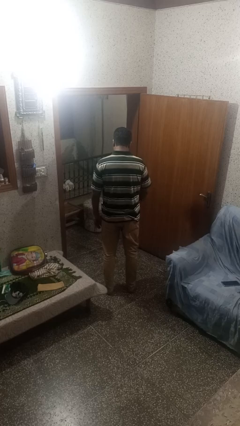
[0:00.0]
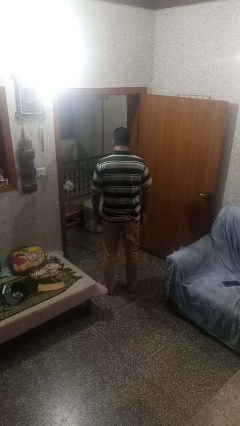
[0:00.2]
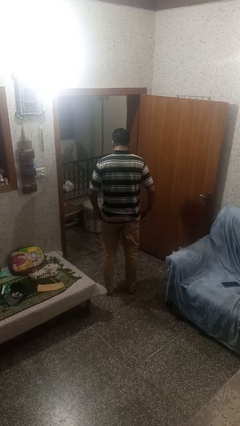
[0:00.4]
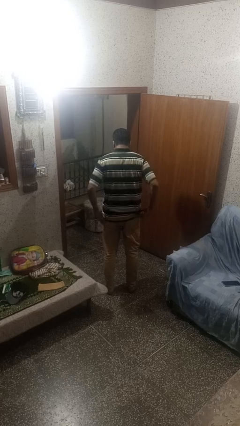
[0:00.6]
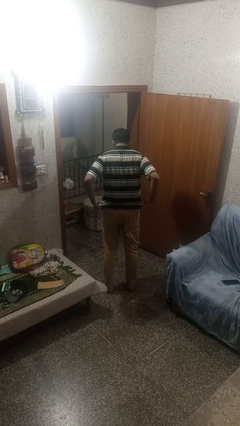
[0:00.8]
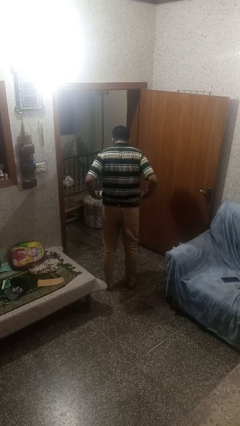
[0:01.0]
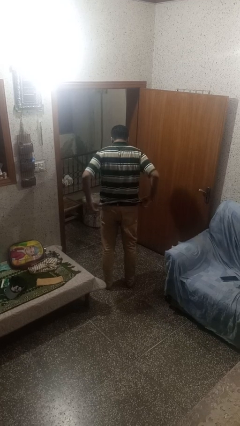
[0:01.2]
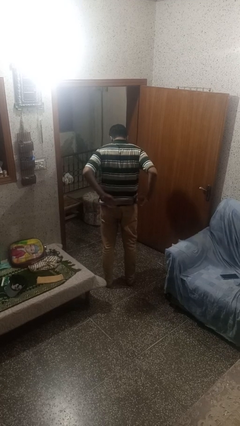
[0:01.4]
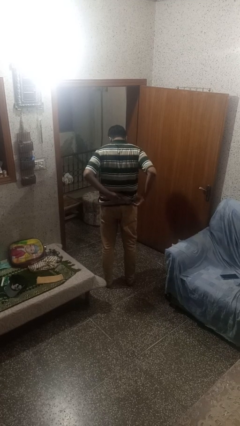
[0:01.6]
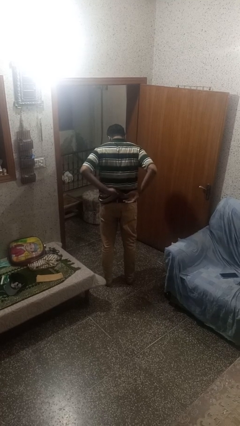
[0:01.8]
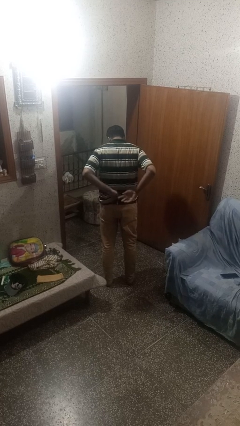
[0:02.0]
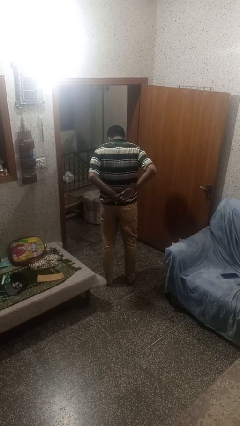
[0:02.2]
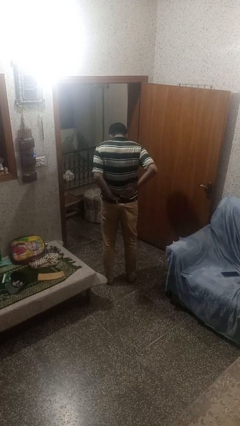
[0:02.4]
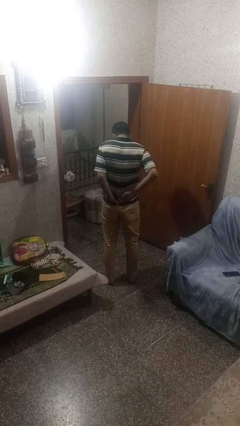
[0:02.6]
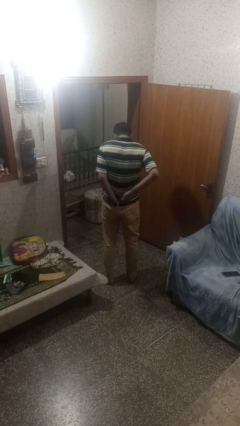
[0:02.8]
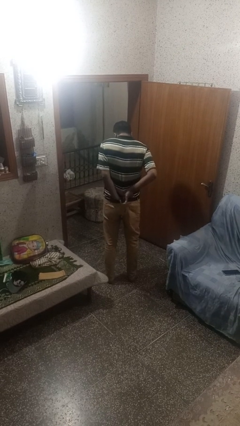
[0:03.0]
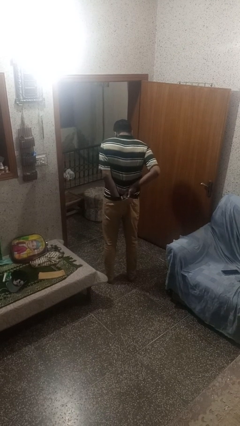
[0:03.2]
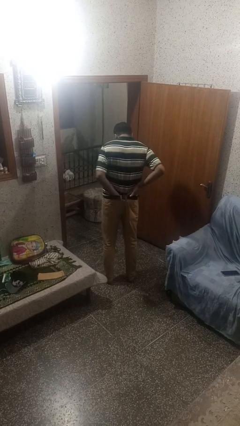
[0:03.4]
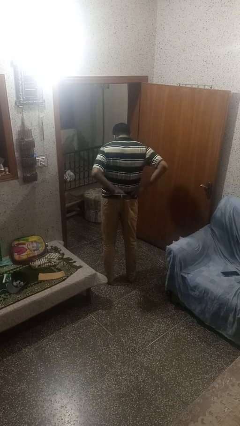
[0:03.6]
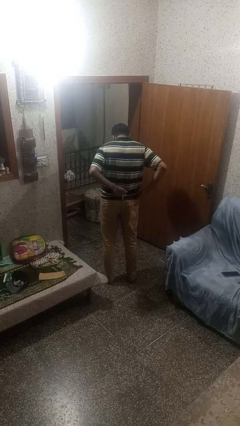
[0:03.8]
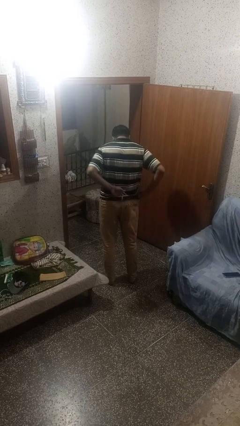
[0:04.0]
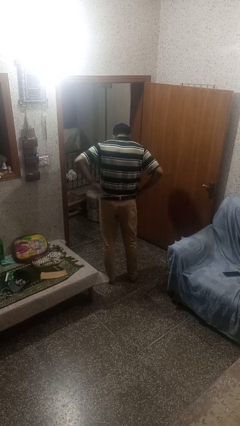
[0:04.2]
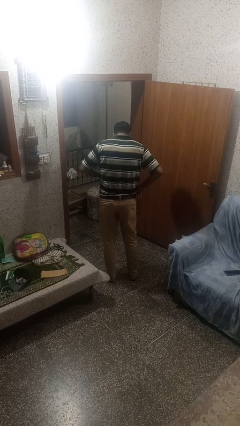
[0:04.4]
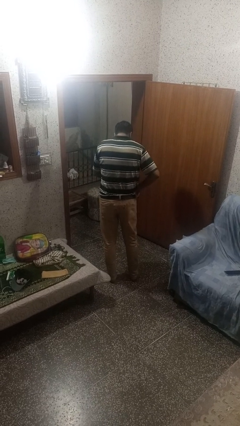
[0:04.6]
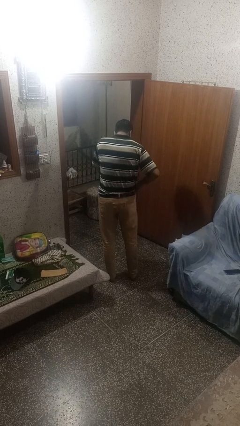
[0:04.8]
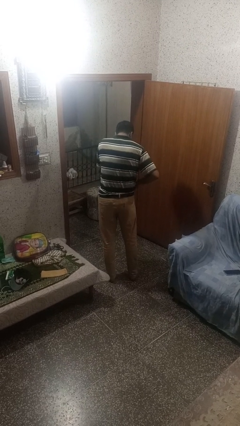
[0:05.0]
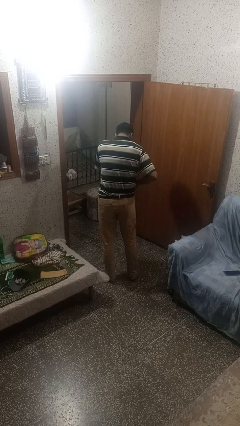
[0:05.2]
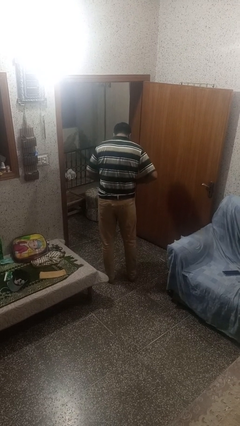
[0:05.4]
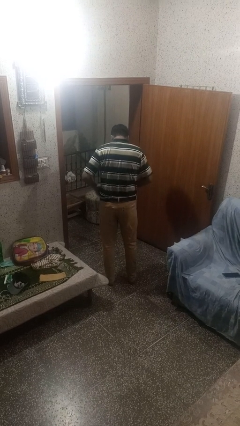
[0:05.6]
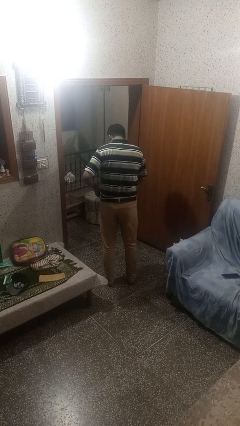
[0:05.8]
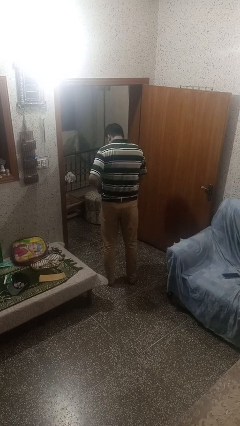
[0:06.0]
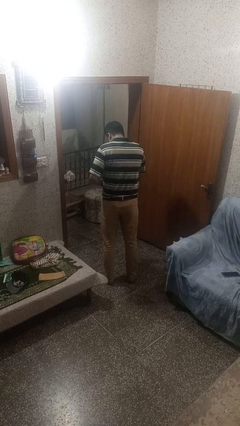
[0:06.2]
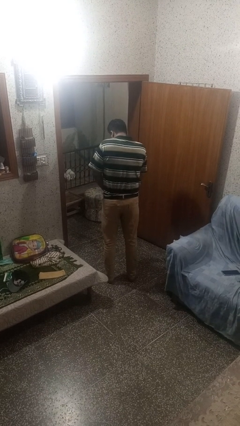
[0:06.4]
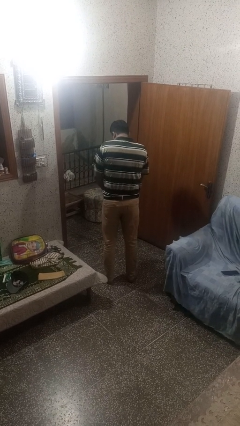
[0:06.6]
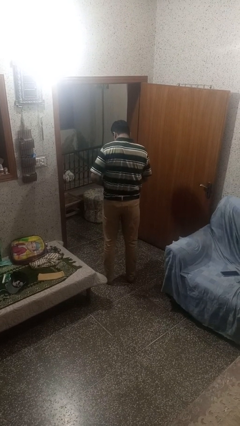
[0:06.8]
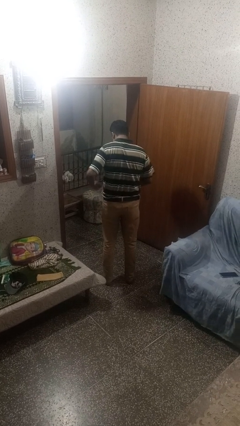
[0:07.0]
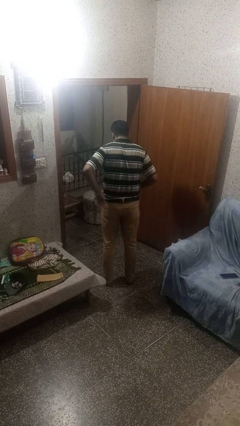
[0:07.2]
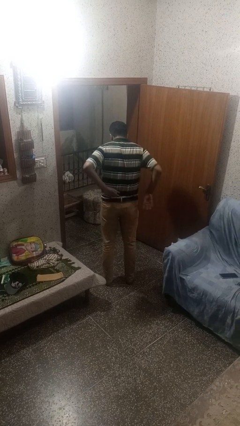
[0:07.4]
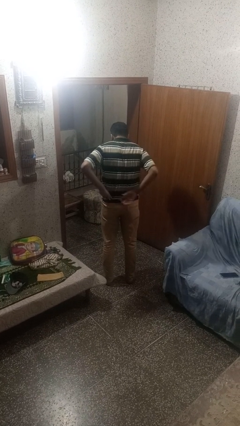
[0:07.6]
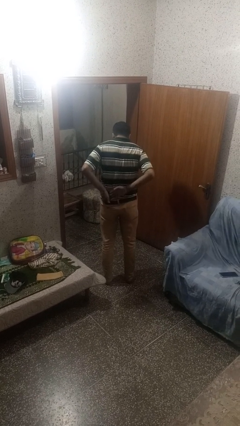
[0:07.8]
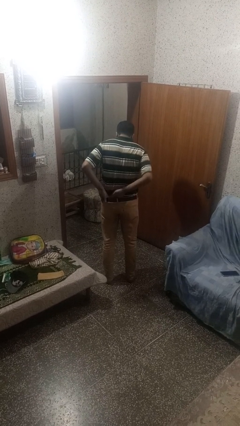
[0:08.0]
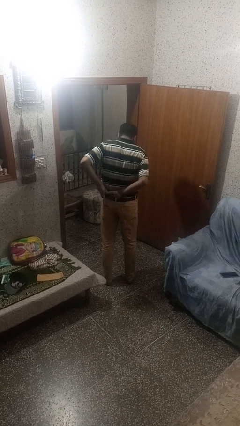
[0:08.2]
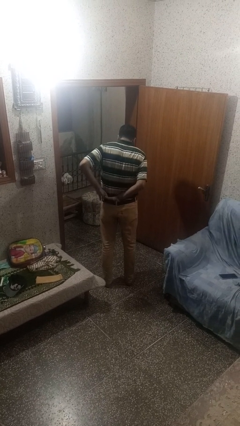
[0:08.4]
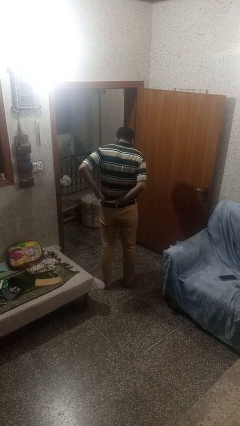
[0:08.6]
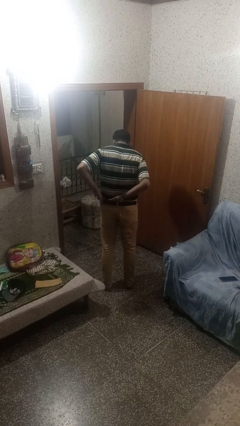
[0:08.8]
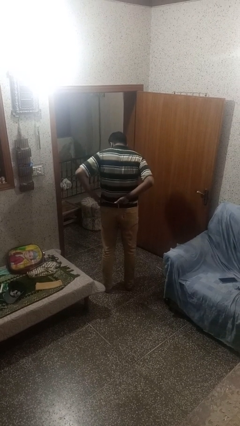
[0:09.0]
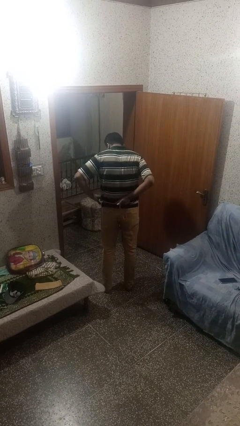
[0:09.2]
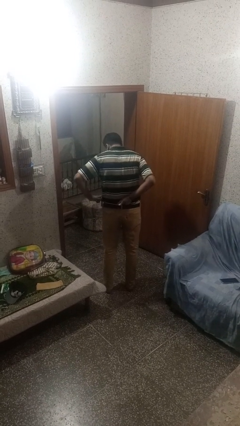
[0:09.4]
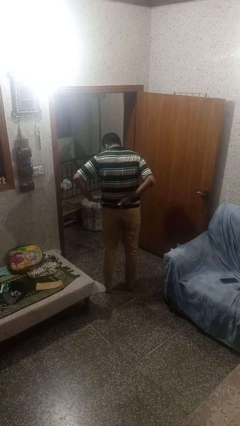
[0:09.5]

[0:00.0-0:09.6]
person tucks in shirt

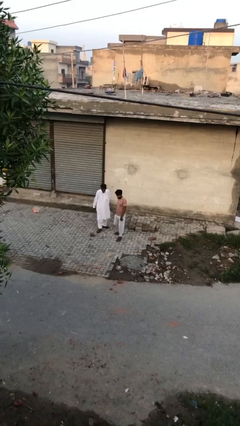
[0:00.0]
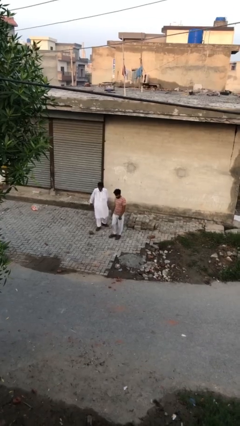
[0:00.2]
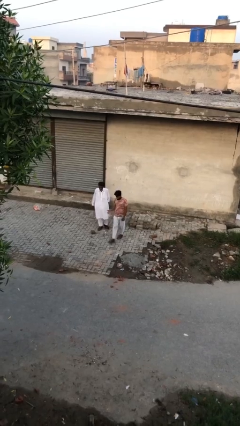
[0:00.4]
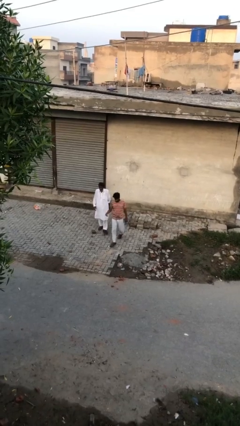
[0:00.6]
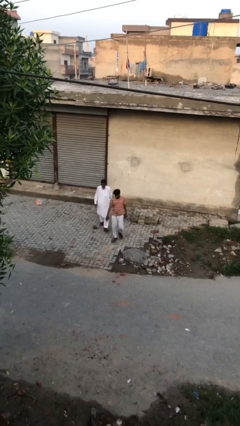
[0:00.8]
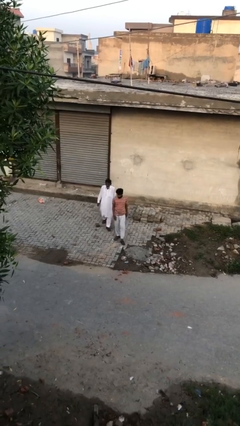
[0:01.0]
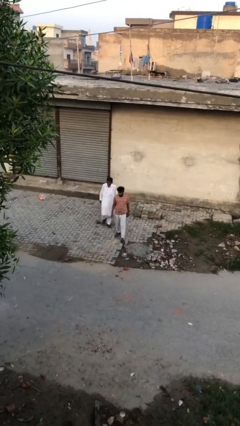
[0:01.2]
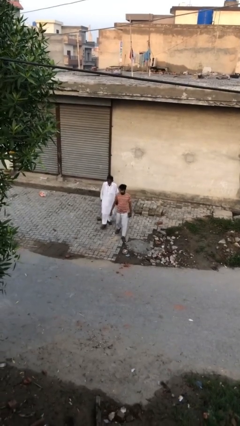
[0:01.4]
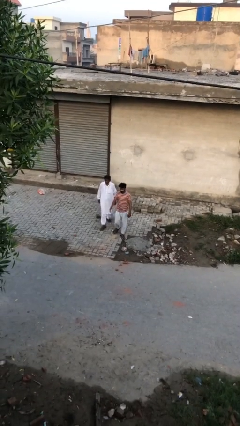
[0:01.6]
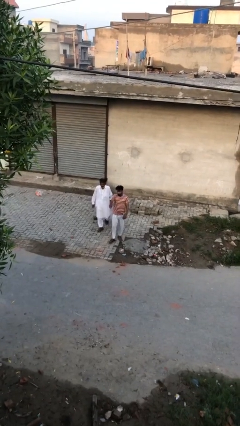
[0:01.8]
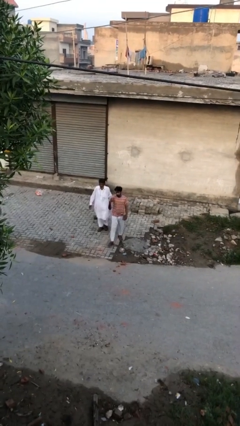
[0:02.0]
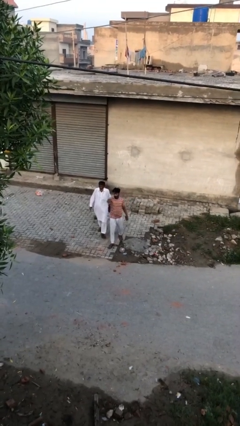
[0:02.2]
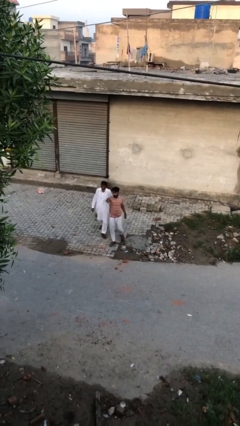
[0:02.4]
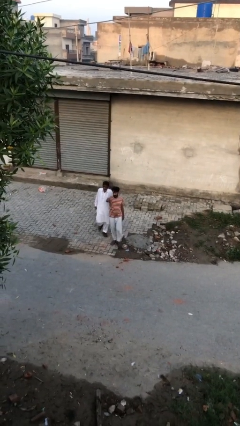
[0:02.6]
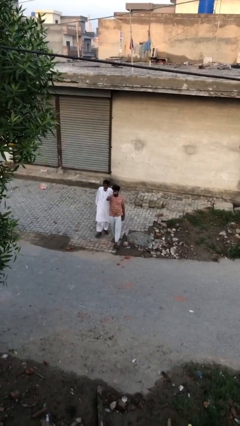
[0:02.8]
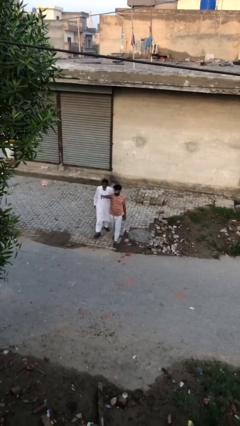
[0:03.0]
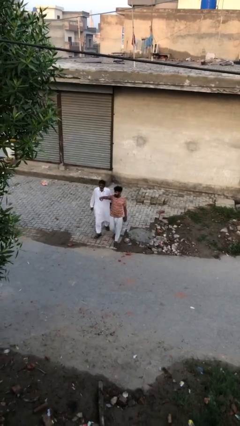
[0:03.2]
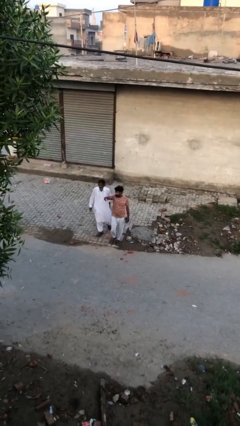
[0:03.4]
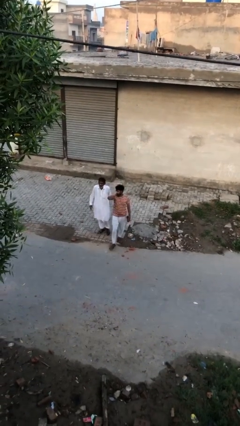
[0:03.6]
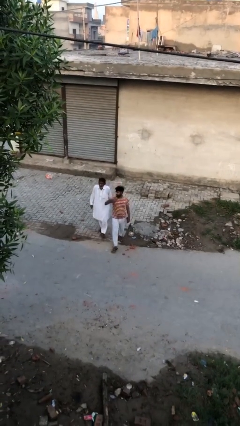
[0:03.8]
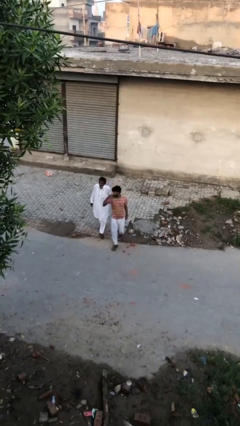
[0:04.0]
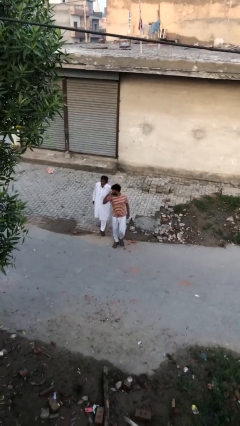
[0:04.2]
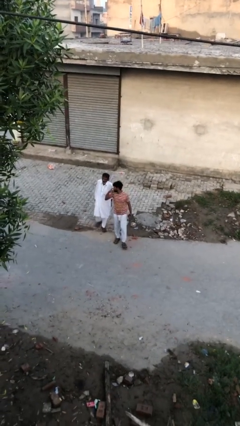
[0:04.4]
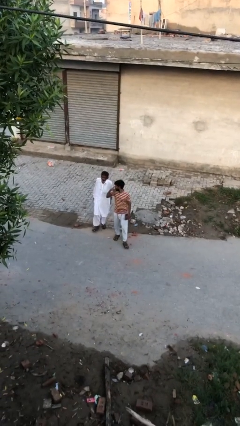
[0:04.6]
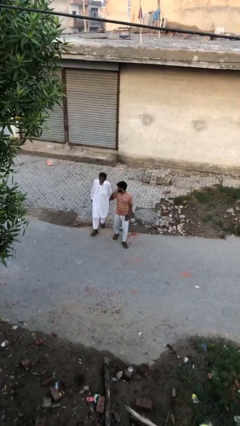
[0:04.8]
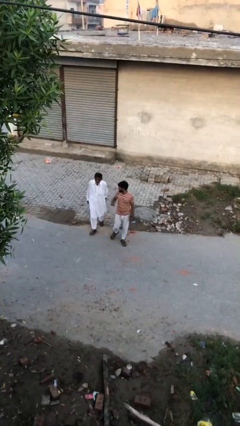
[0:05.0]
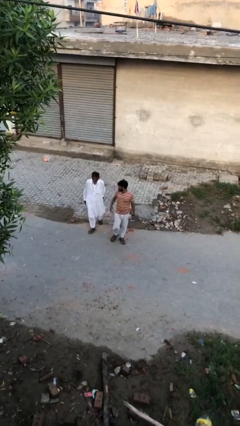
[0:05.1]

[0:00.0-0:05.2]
person talks to person

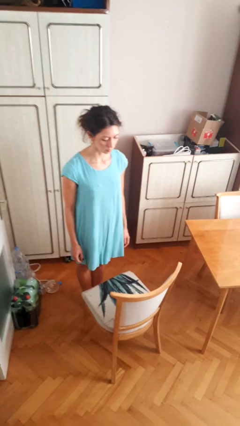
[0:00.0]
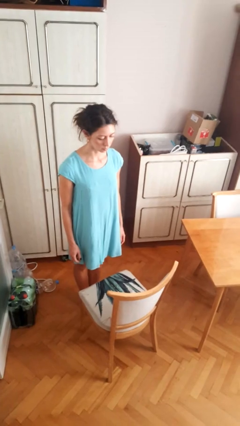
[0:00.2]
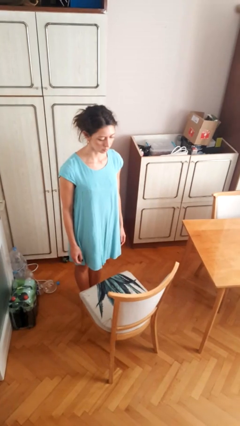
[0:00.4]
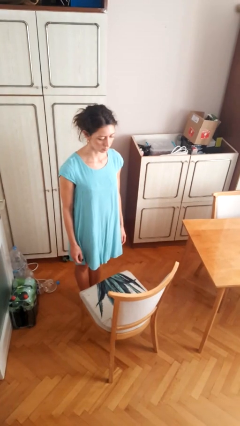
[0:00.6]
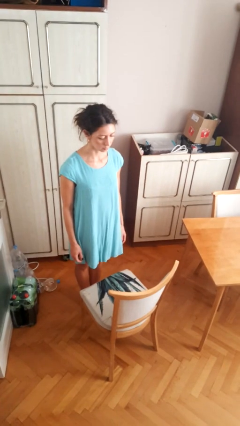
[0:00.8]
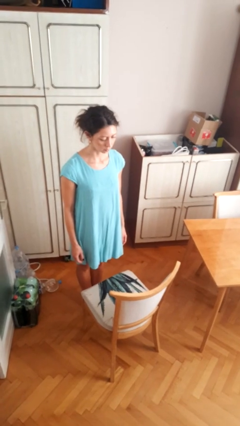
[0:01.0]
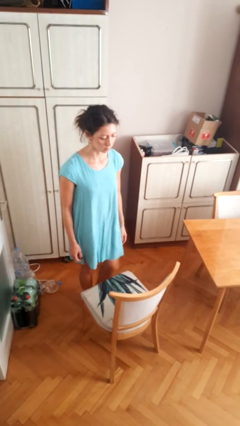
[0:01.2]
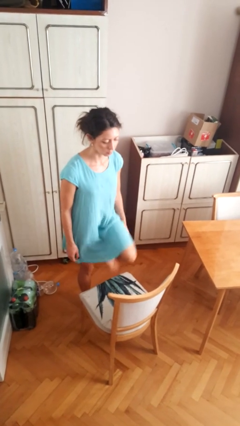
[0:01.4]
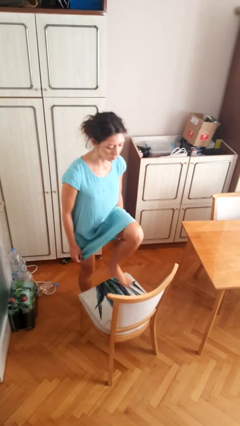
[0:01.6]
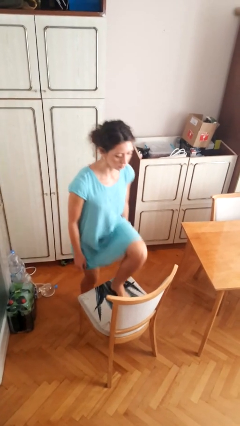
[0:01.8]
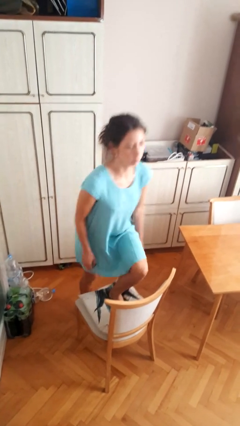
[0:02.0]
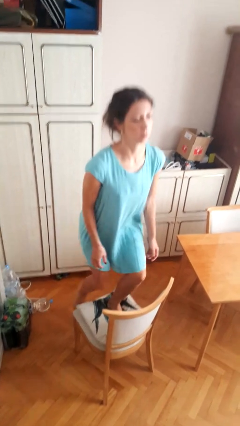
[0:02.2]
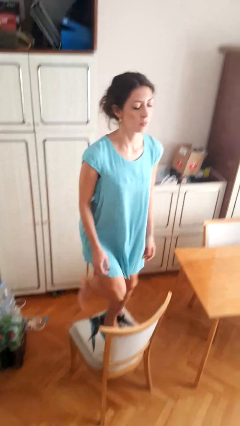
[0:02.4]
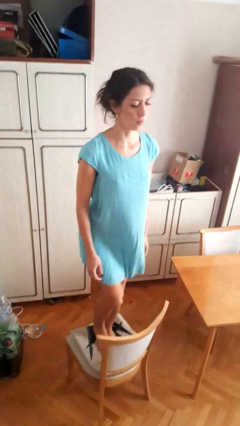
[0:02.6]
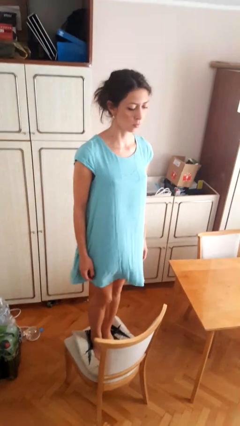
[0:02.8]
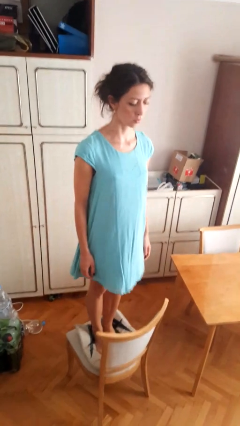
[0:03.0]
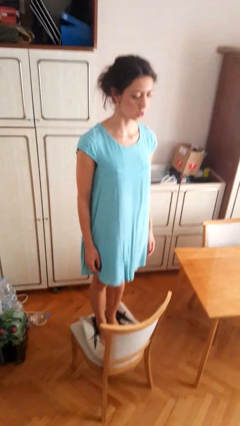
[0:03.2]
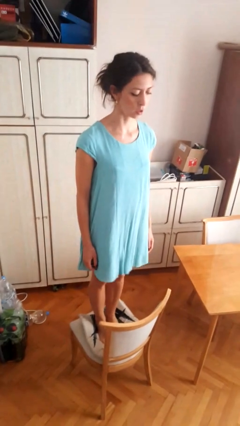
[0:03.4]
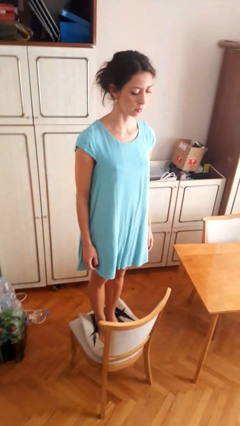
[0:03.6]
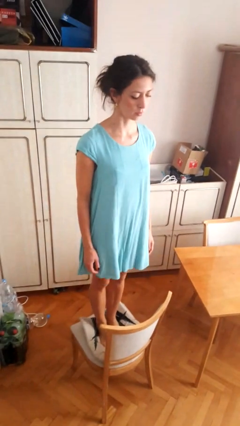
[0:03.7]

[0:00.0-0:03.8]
person climbs on chair
